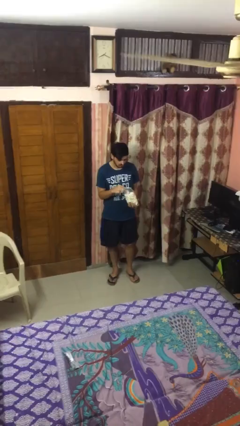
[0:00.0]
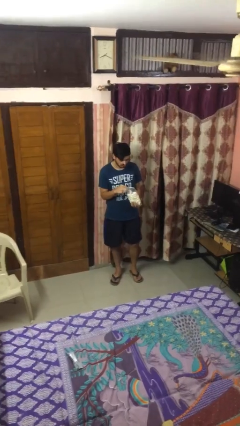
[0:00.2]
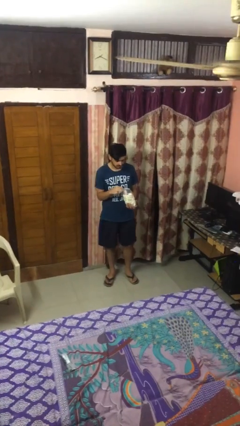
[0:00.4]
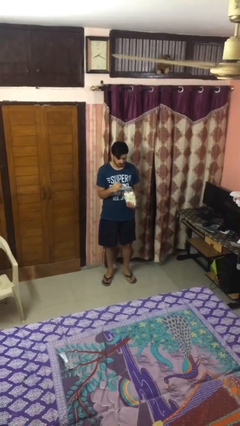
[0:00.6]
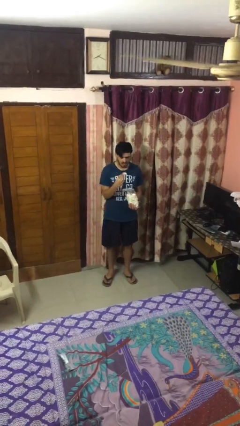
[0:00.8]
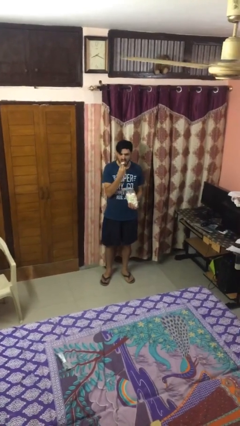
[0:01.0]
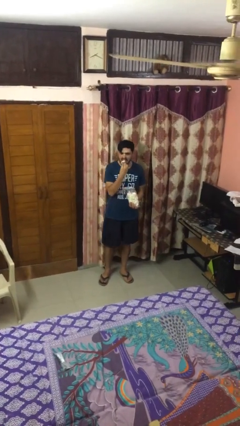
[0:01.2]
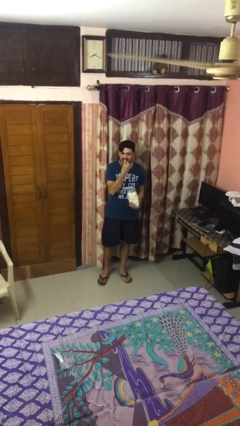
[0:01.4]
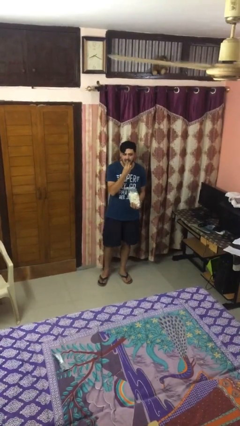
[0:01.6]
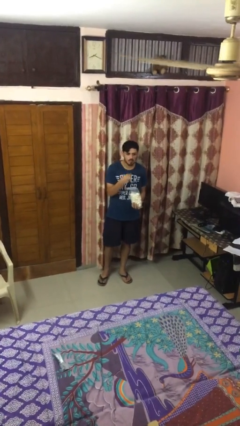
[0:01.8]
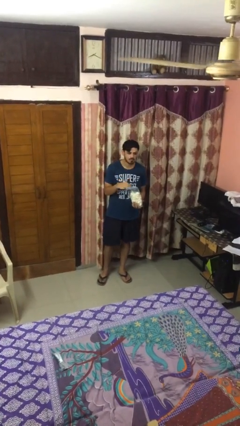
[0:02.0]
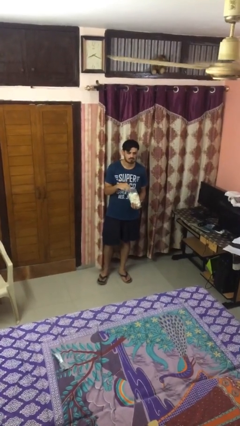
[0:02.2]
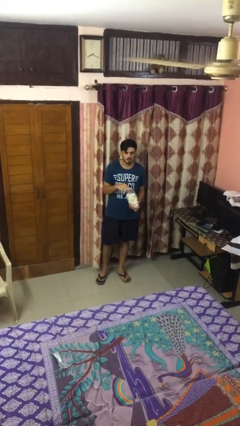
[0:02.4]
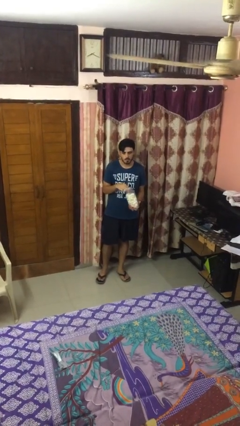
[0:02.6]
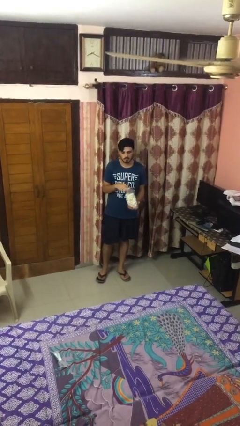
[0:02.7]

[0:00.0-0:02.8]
person eats snack from bag

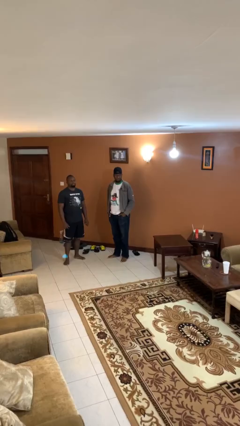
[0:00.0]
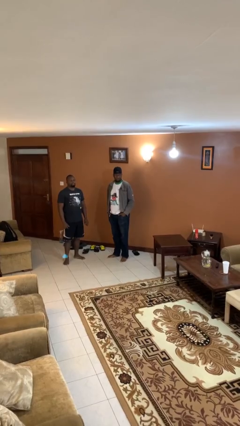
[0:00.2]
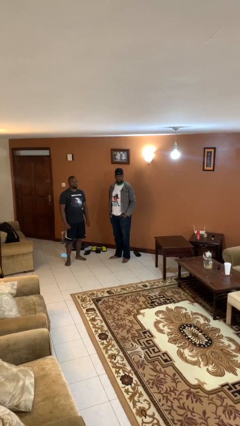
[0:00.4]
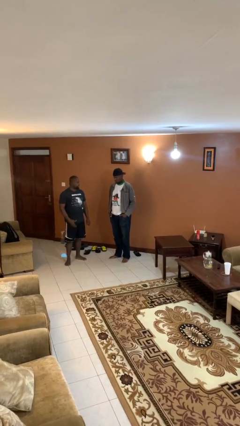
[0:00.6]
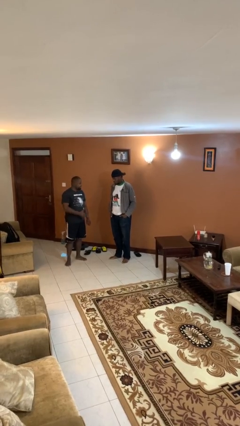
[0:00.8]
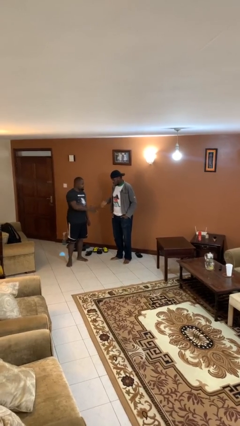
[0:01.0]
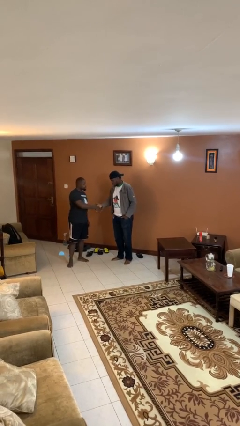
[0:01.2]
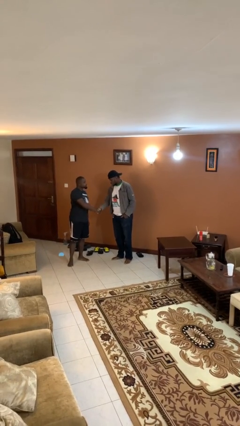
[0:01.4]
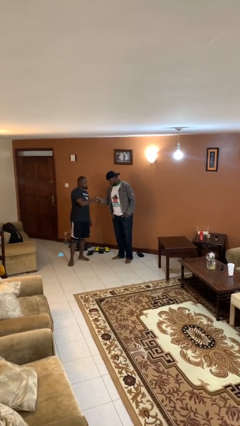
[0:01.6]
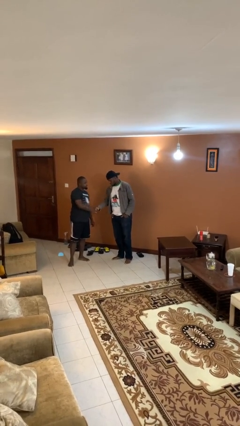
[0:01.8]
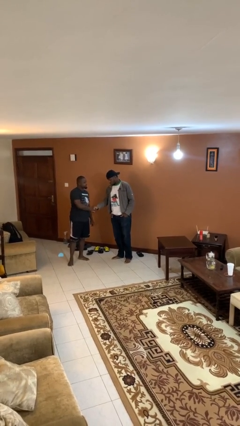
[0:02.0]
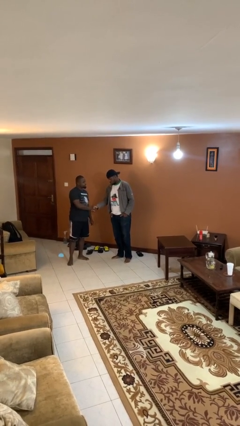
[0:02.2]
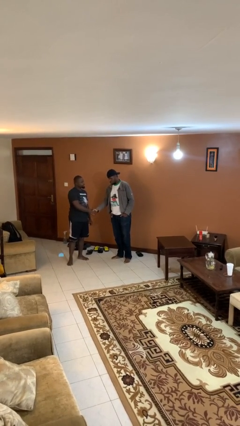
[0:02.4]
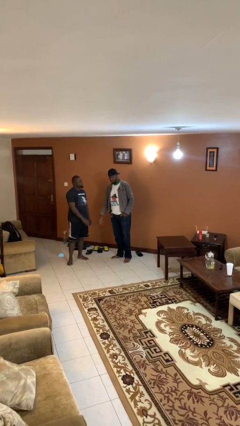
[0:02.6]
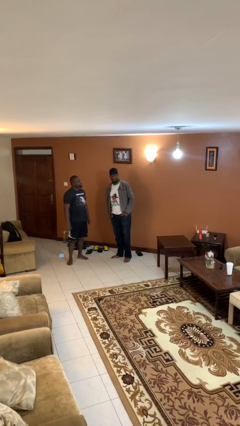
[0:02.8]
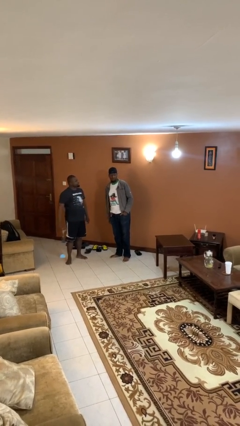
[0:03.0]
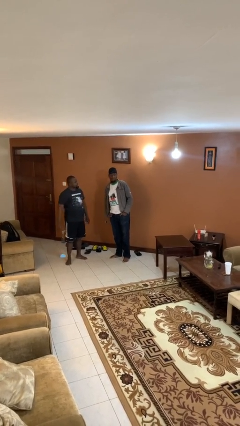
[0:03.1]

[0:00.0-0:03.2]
person shakes hand

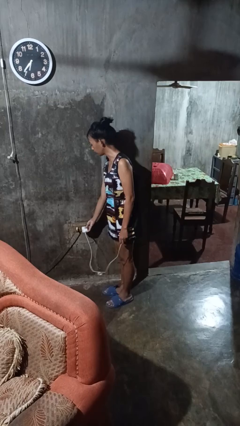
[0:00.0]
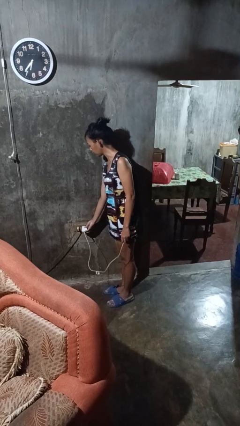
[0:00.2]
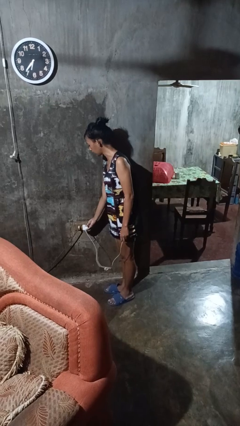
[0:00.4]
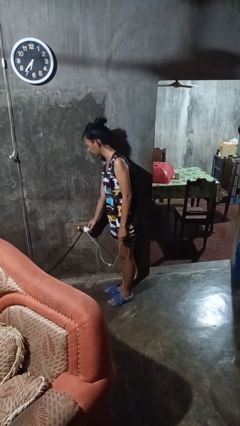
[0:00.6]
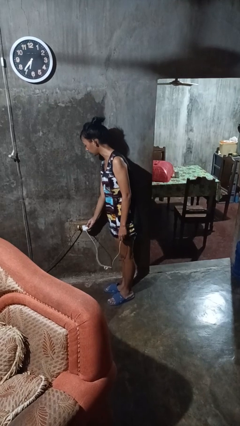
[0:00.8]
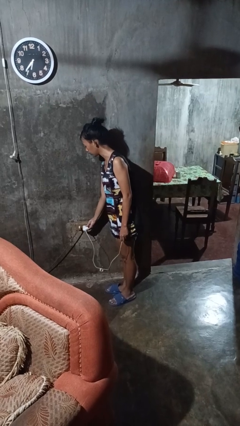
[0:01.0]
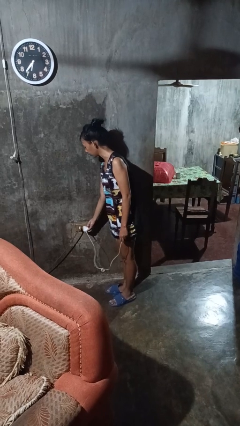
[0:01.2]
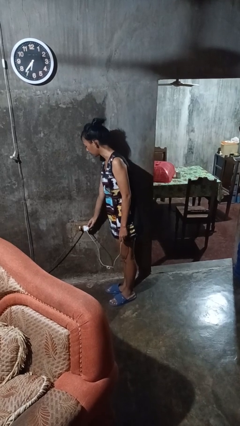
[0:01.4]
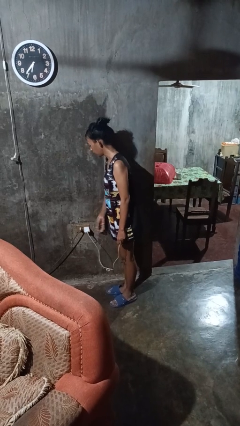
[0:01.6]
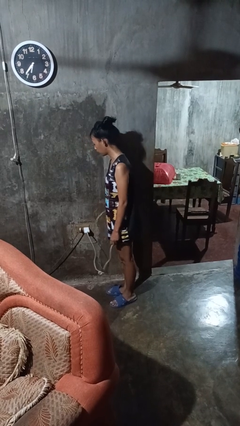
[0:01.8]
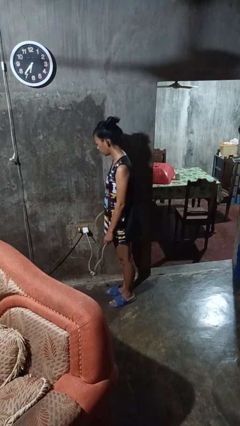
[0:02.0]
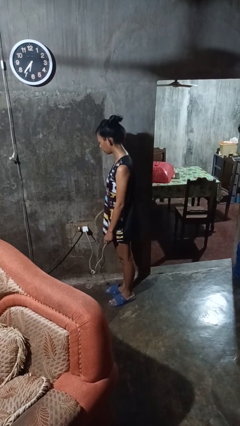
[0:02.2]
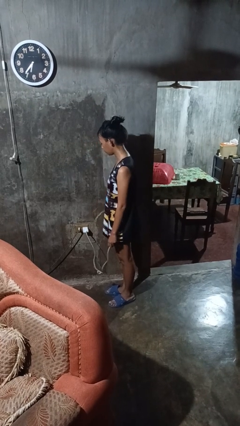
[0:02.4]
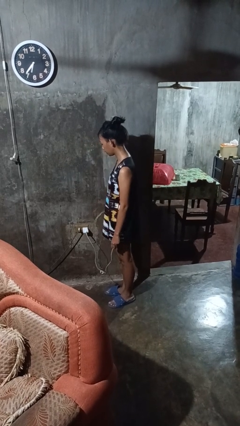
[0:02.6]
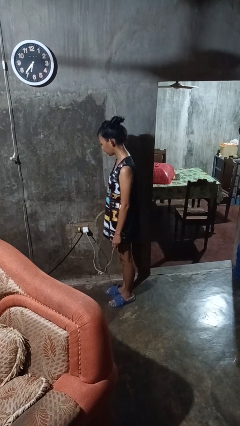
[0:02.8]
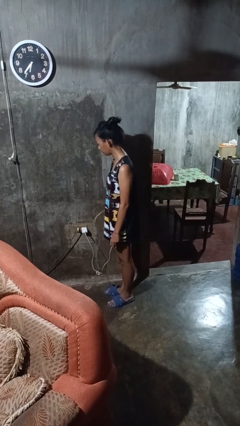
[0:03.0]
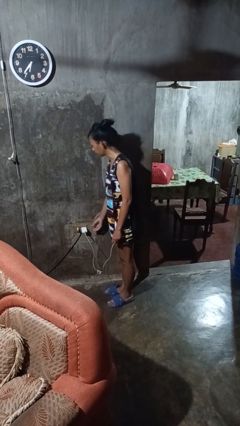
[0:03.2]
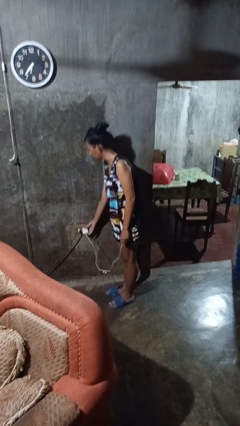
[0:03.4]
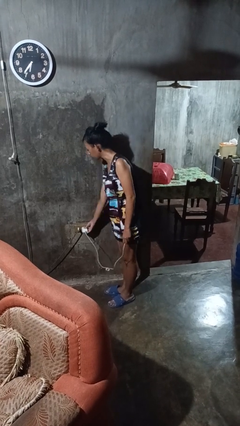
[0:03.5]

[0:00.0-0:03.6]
person plugs into electrical socket

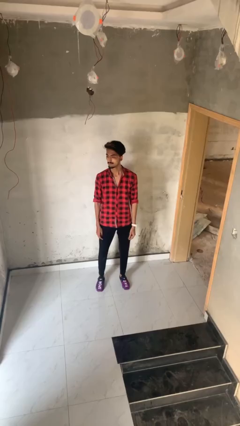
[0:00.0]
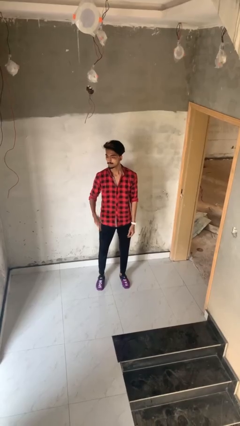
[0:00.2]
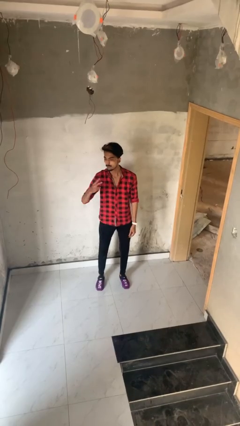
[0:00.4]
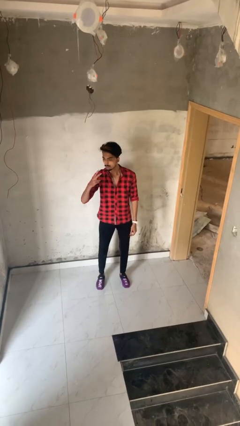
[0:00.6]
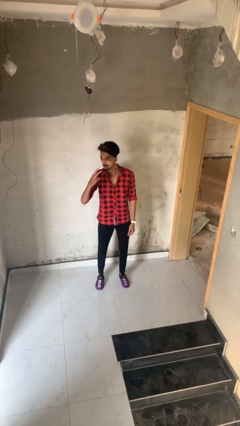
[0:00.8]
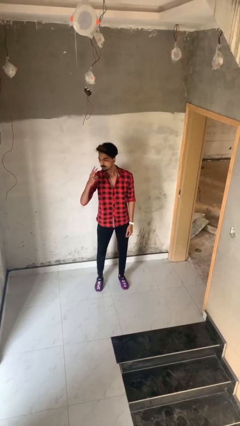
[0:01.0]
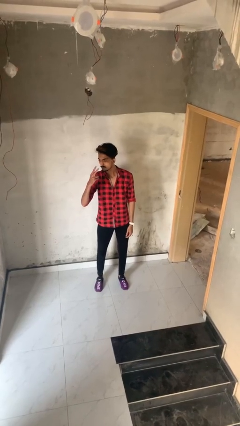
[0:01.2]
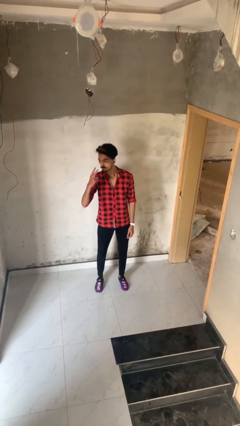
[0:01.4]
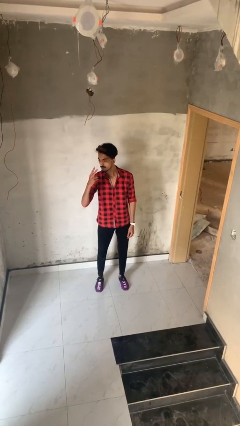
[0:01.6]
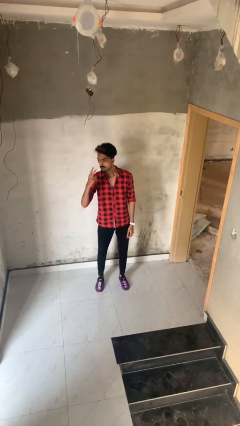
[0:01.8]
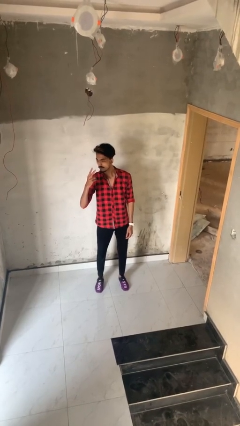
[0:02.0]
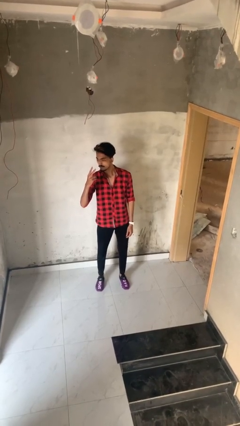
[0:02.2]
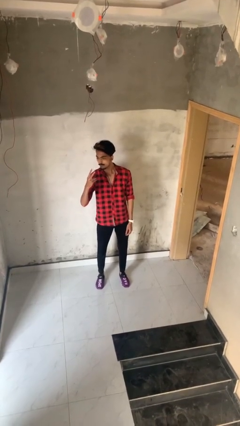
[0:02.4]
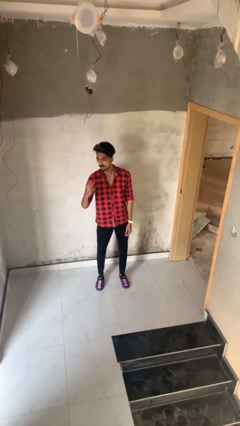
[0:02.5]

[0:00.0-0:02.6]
person gestures peace

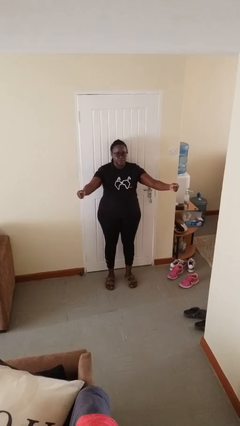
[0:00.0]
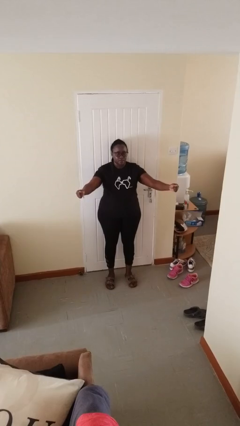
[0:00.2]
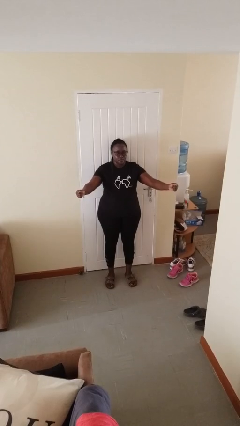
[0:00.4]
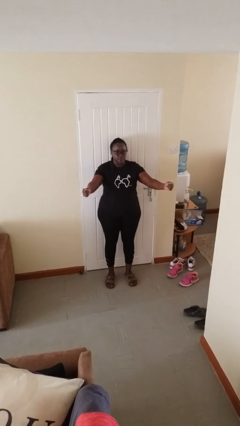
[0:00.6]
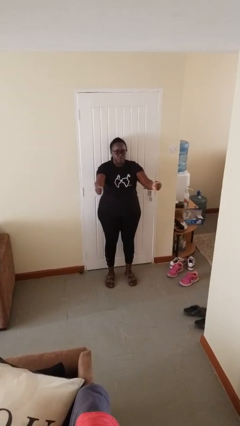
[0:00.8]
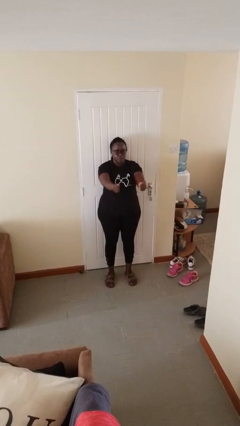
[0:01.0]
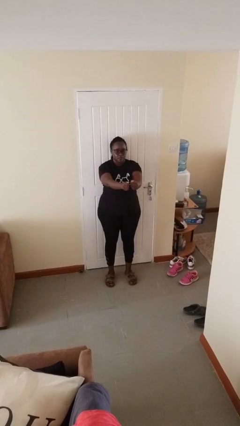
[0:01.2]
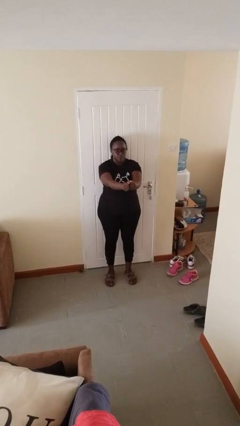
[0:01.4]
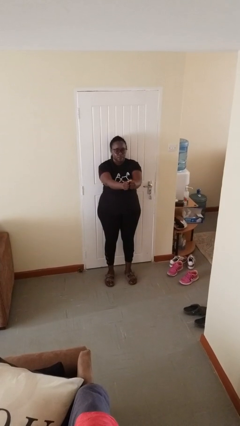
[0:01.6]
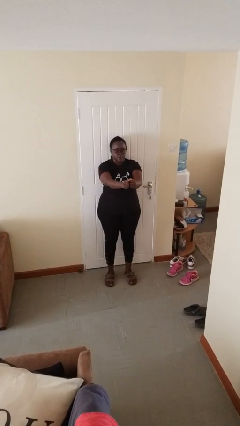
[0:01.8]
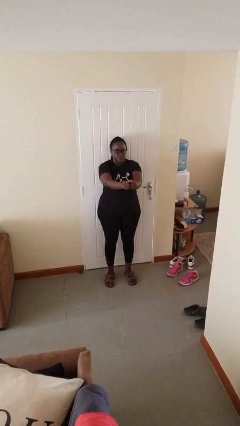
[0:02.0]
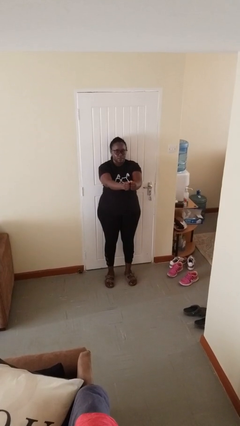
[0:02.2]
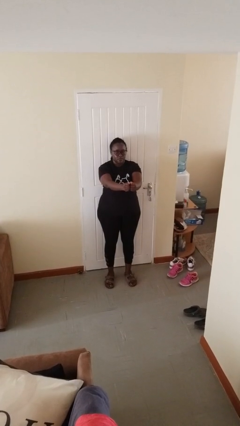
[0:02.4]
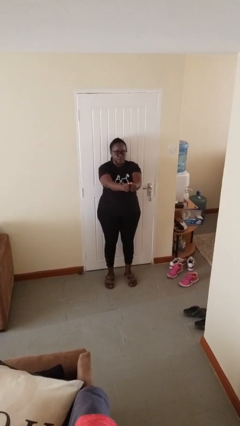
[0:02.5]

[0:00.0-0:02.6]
person gestures zoom out

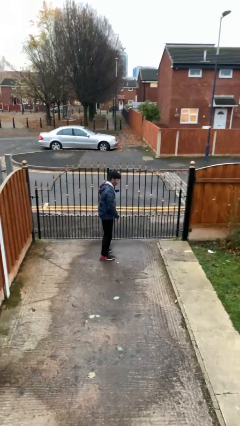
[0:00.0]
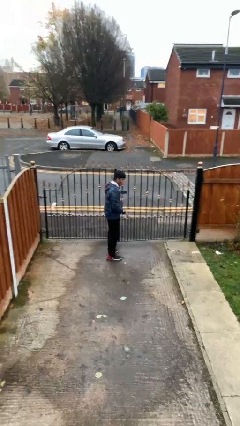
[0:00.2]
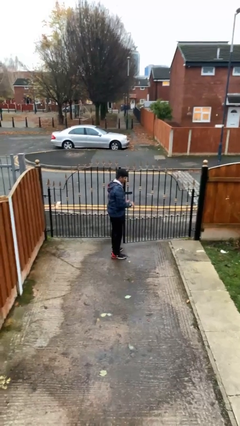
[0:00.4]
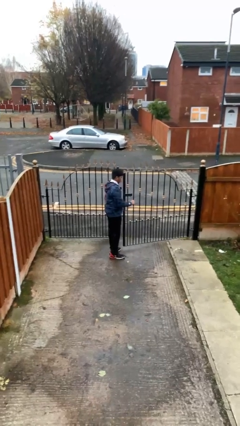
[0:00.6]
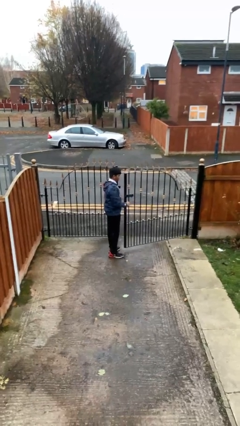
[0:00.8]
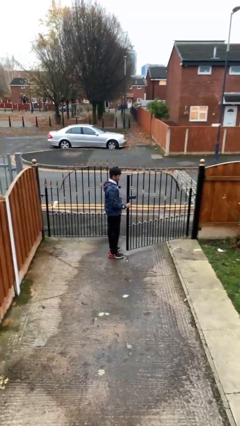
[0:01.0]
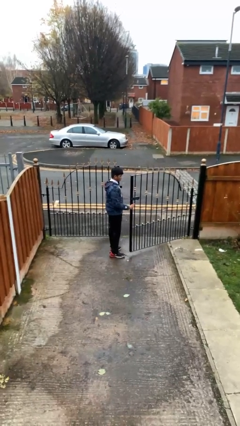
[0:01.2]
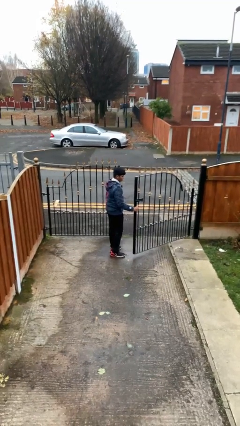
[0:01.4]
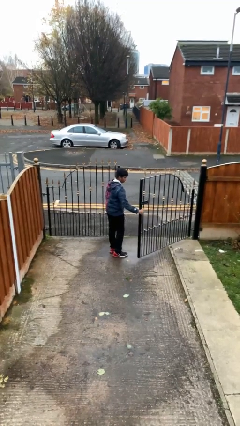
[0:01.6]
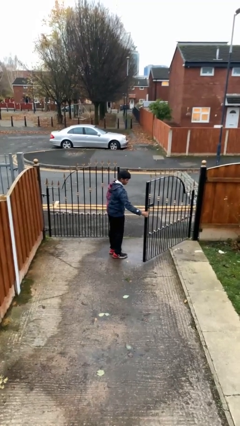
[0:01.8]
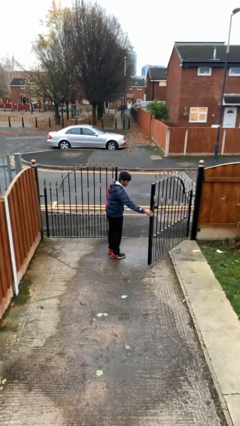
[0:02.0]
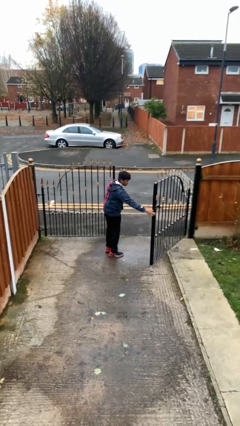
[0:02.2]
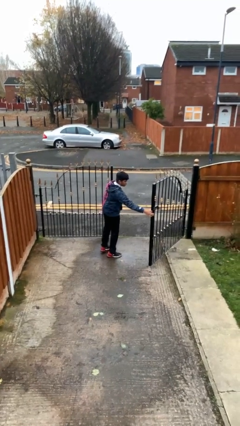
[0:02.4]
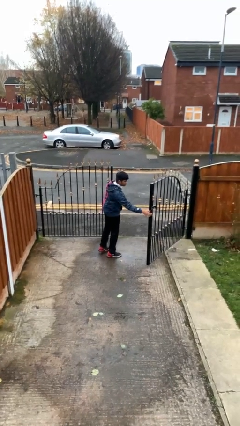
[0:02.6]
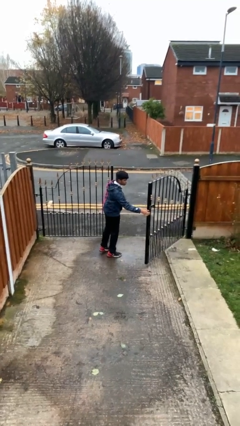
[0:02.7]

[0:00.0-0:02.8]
person opens facility door
